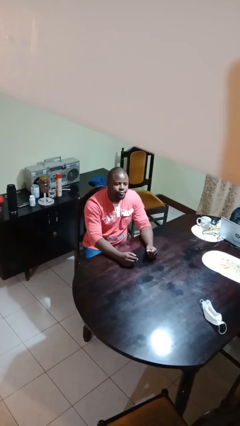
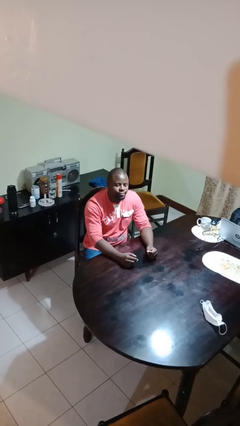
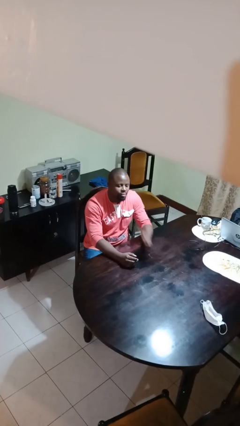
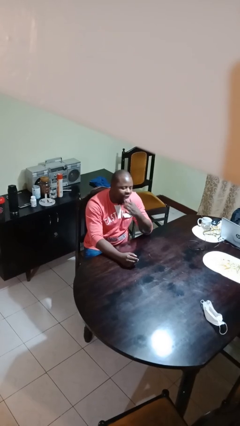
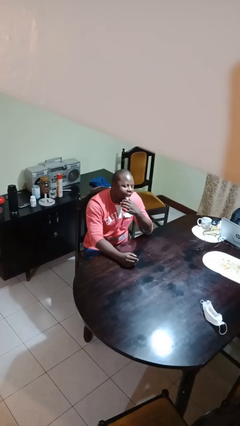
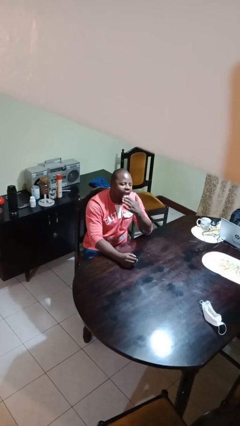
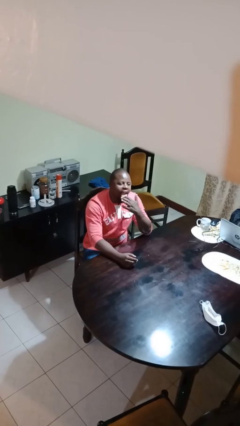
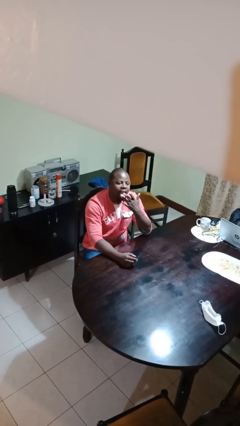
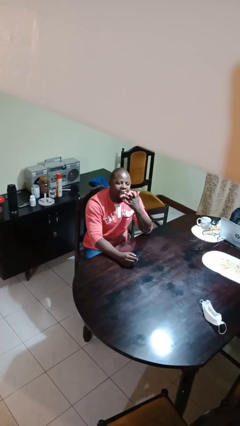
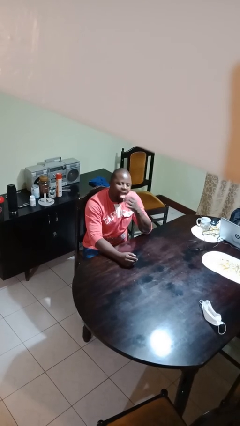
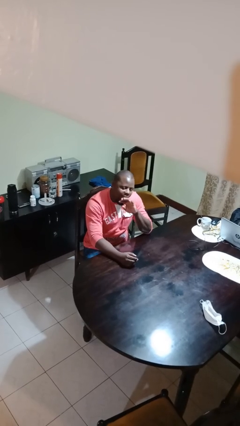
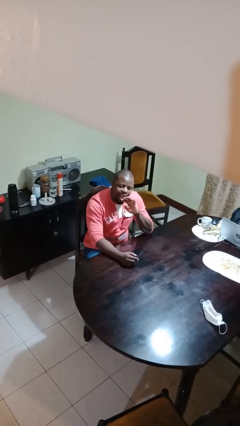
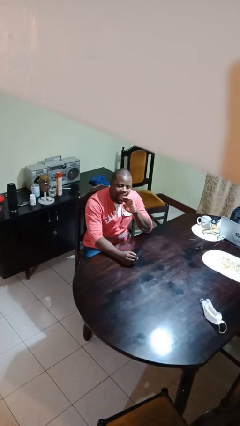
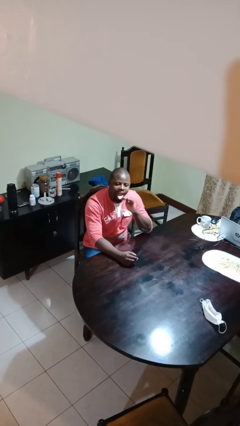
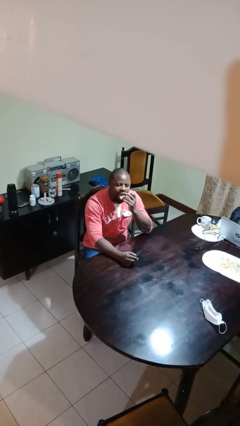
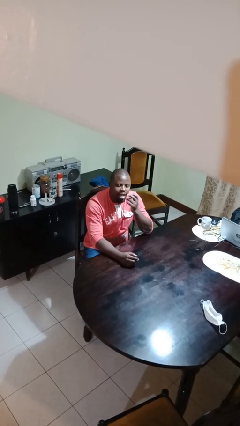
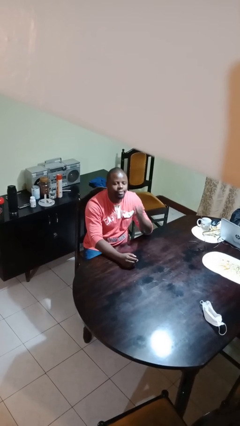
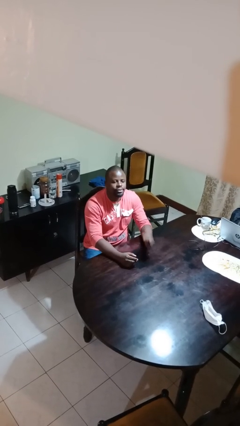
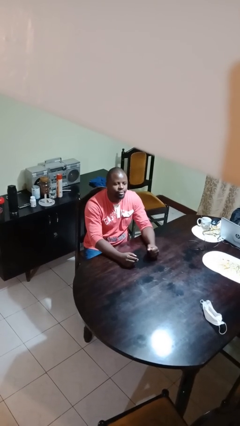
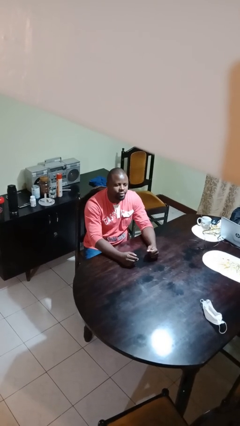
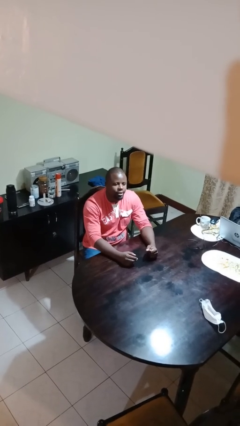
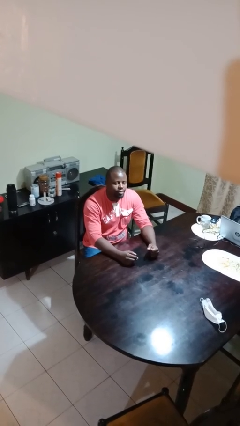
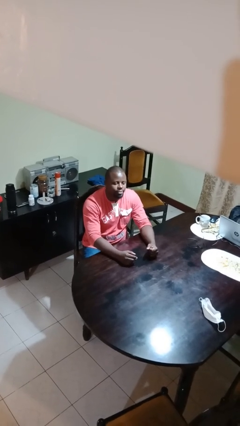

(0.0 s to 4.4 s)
person licks fingers

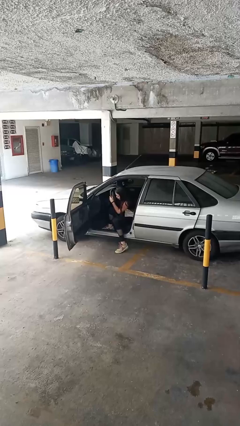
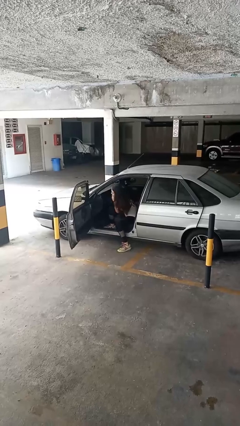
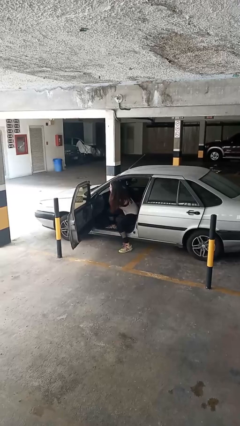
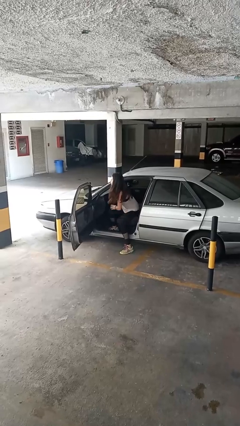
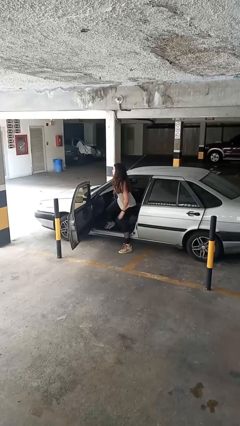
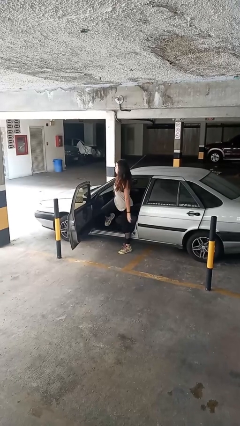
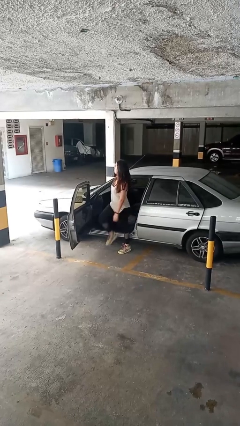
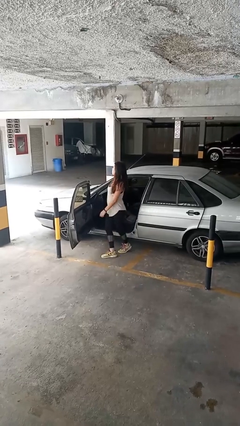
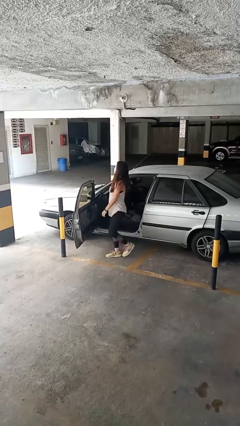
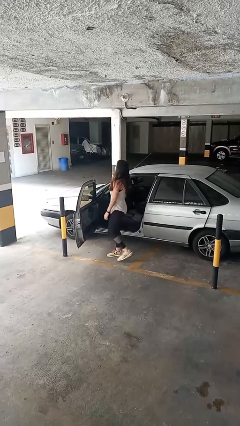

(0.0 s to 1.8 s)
person exits car

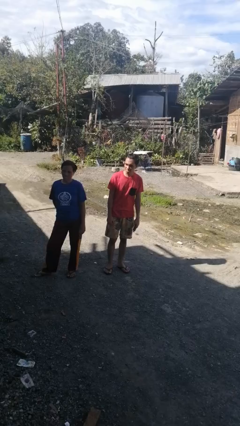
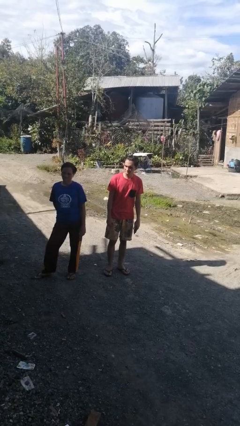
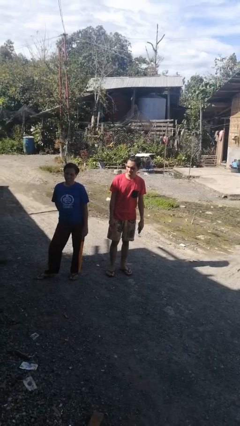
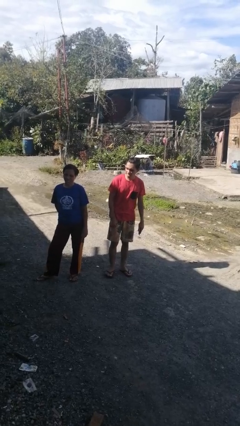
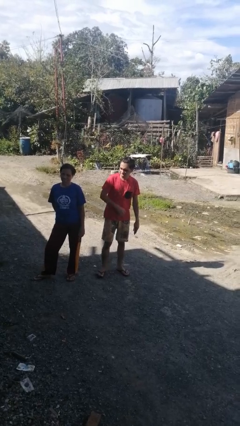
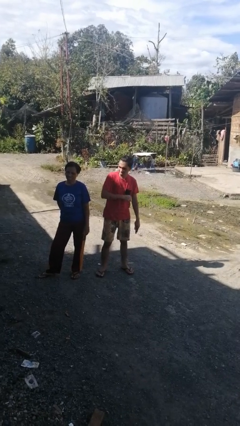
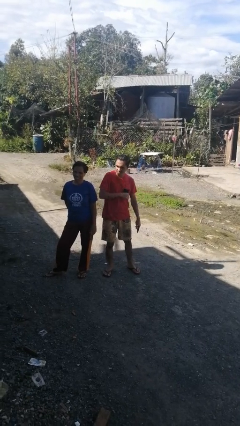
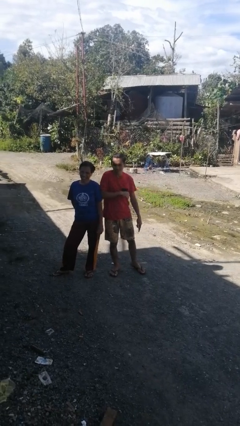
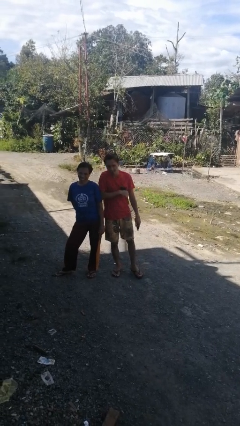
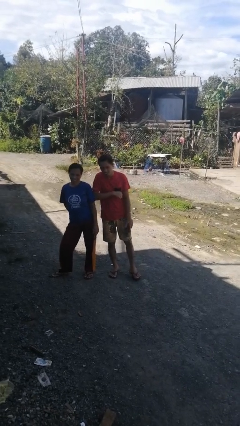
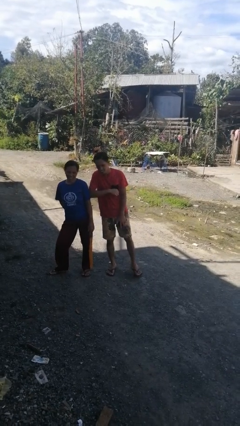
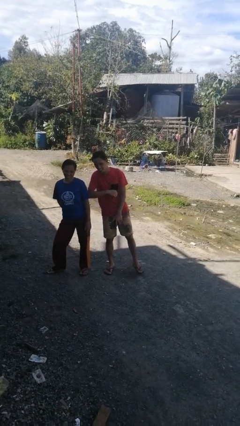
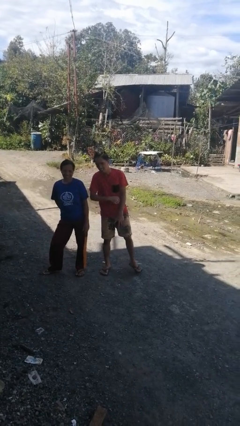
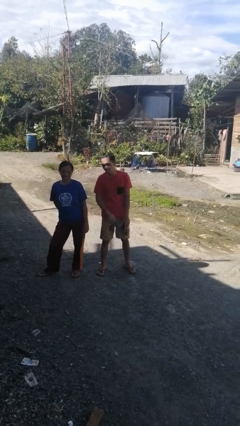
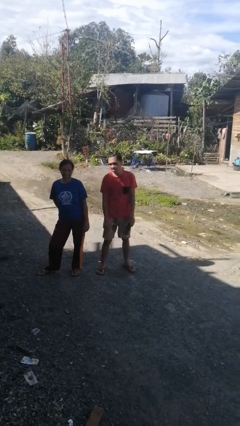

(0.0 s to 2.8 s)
person nudges person with elbow

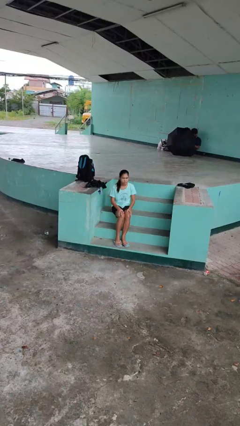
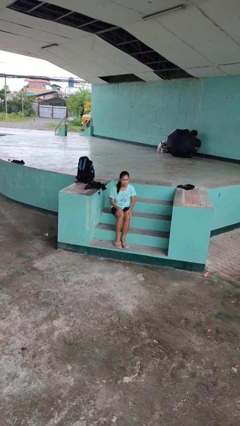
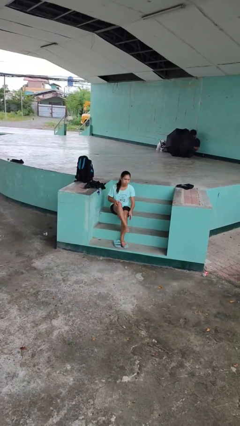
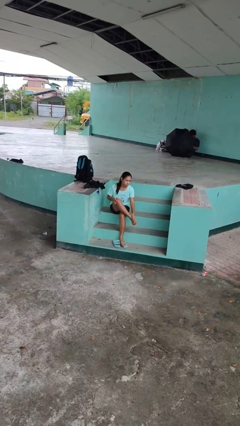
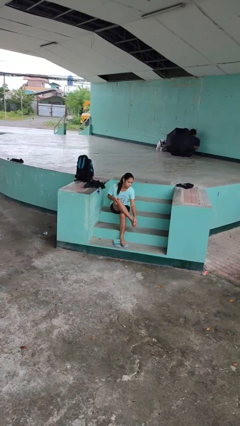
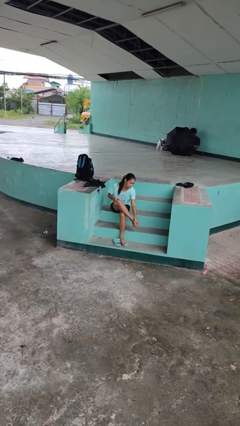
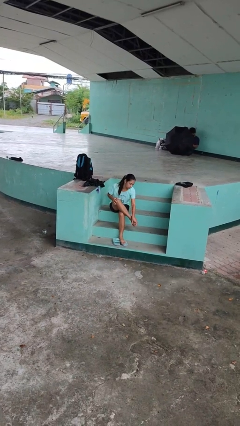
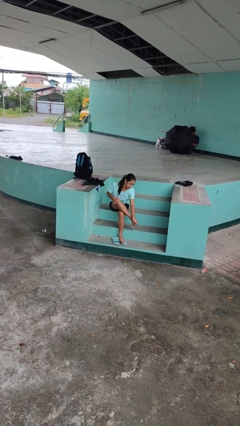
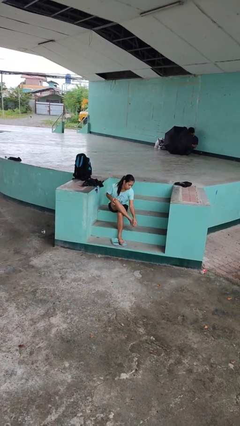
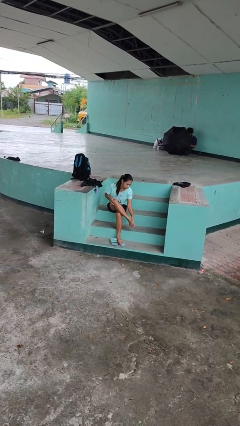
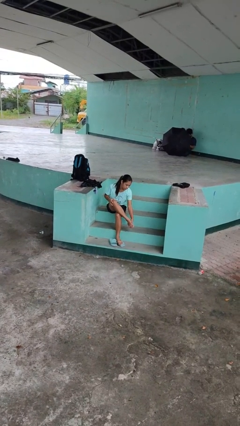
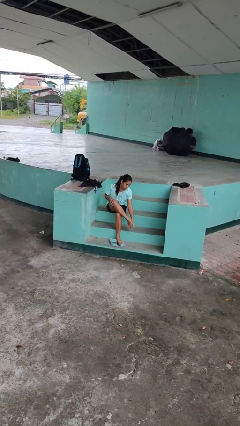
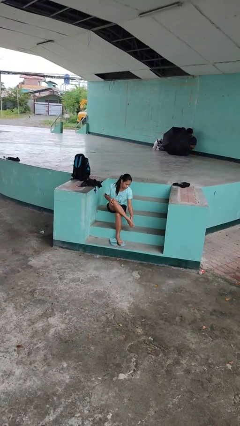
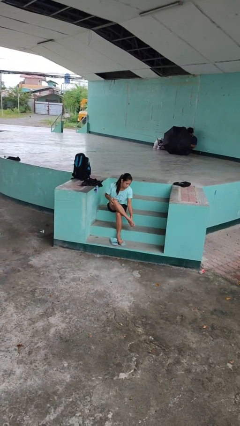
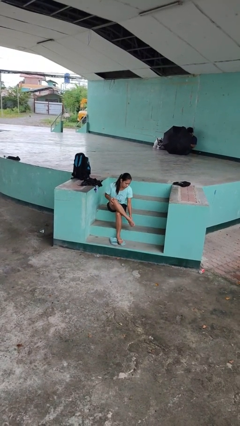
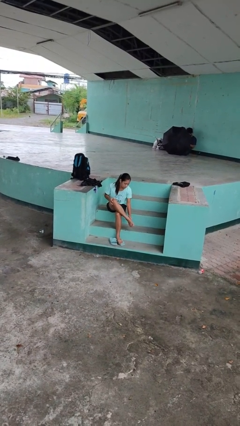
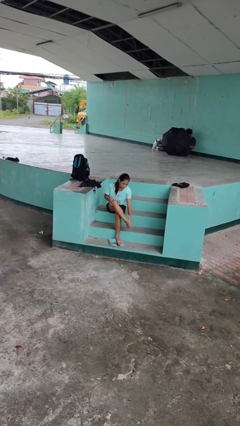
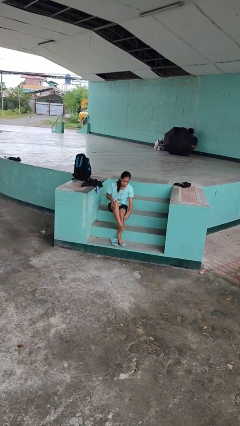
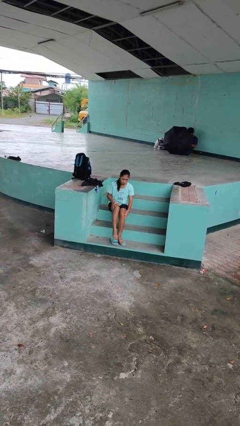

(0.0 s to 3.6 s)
person rubs foot

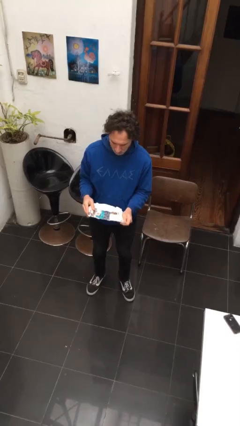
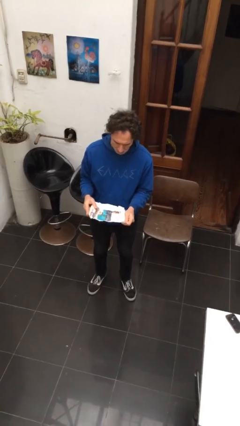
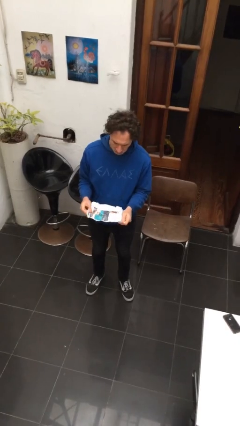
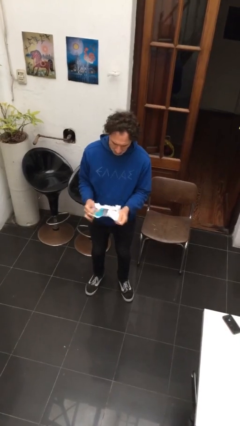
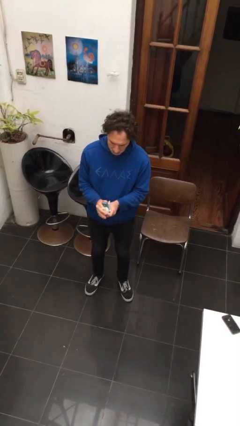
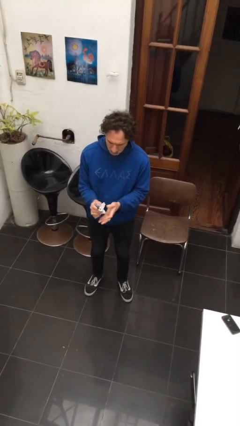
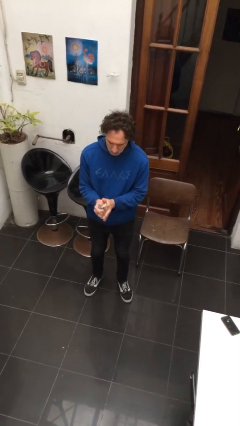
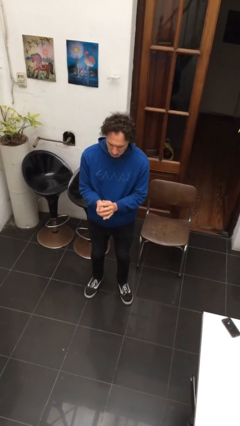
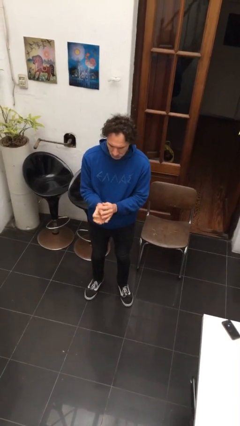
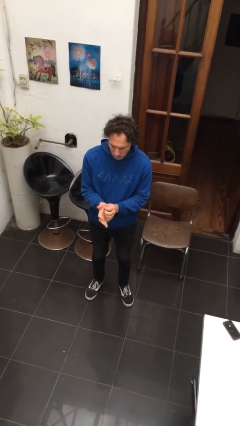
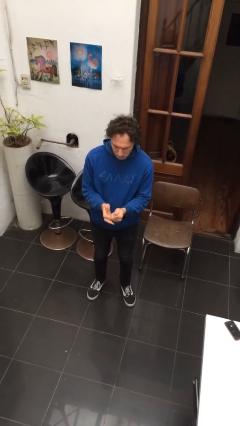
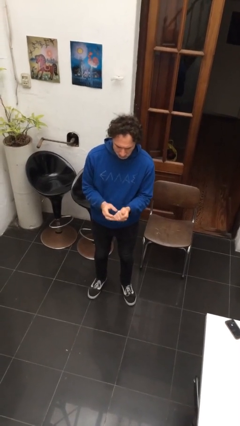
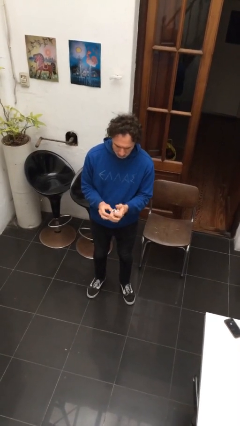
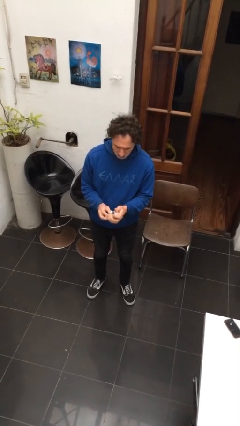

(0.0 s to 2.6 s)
person crumples paper

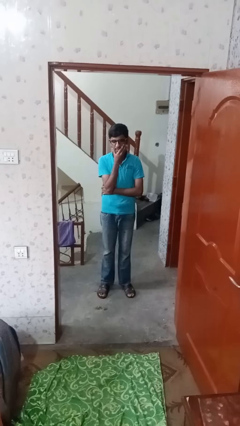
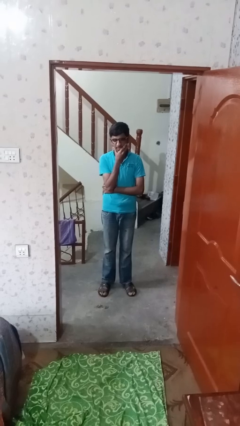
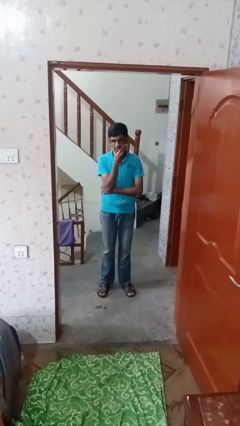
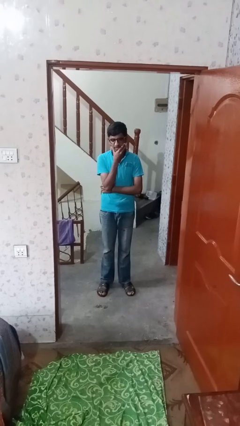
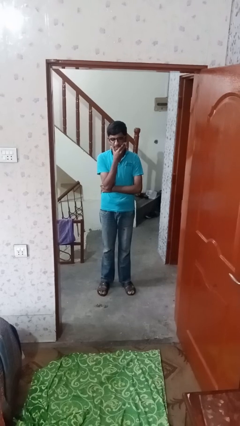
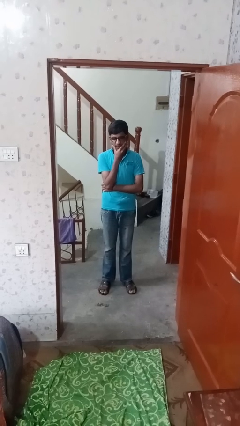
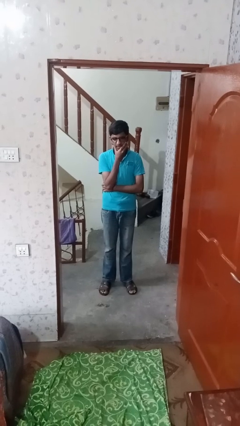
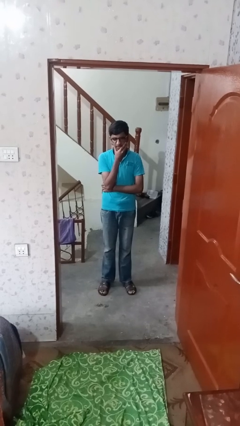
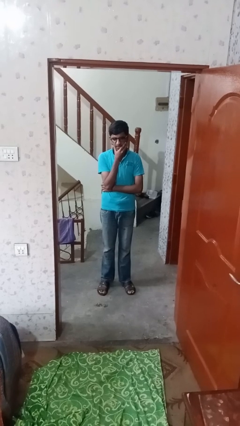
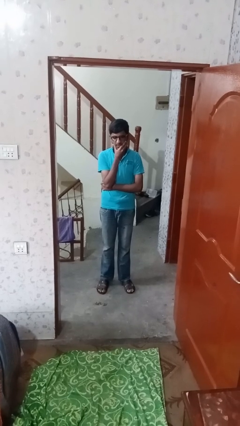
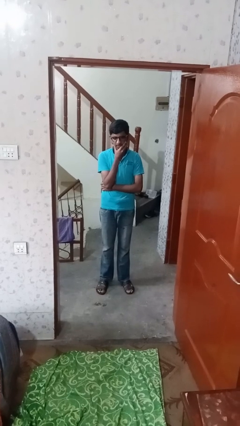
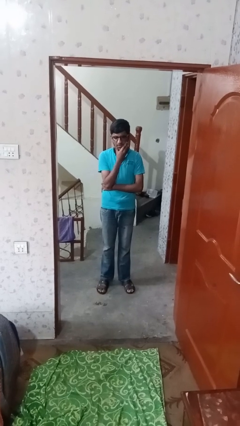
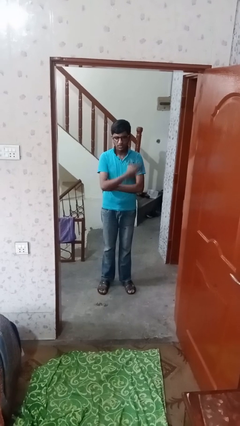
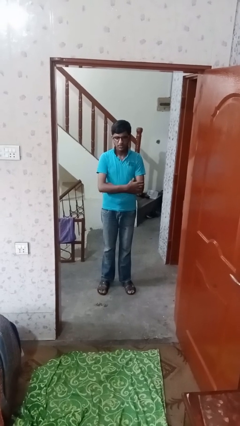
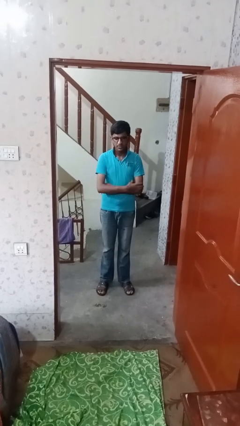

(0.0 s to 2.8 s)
person strokes chin
